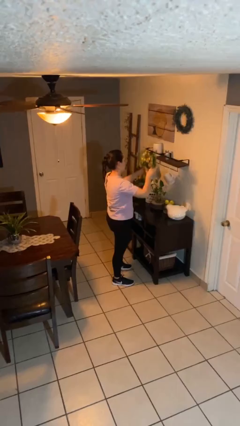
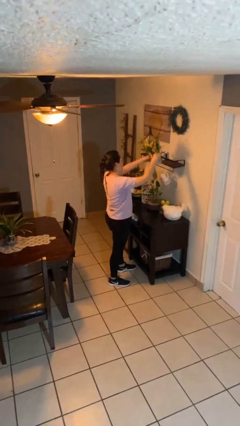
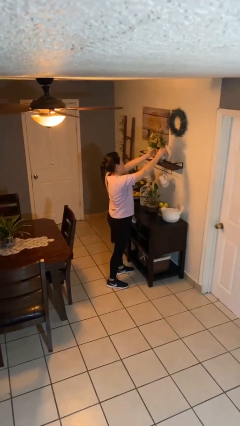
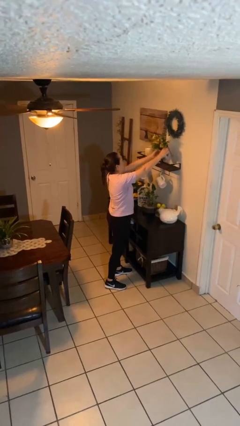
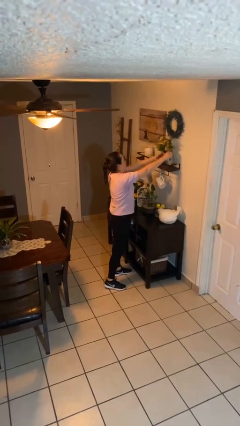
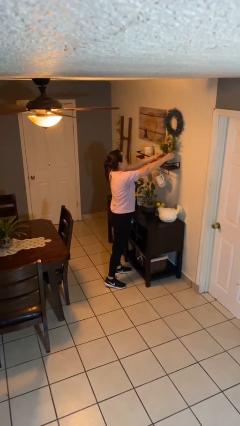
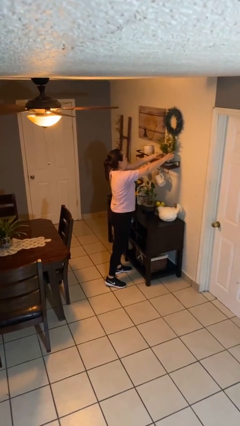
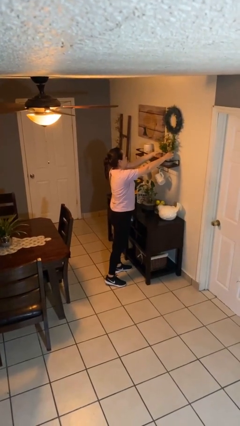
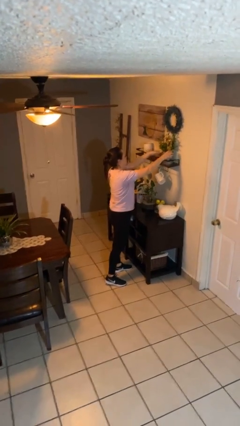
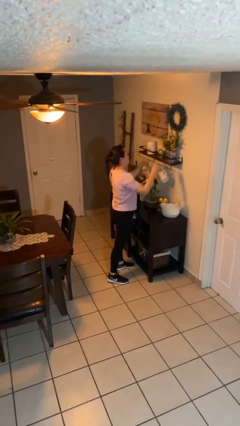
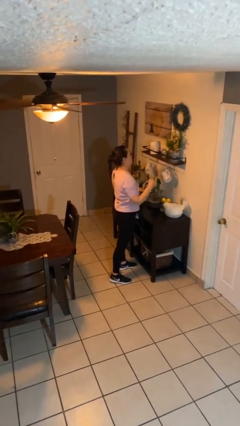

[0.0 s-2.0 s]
person puts down object on countertop

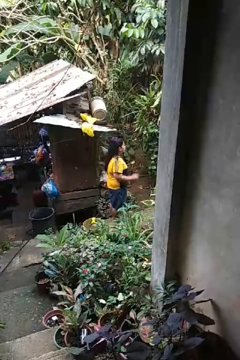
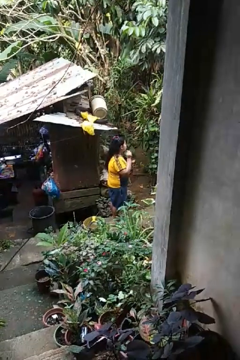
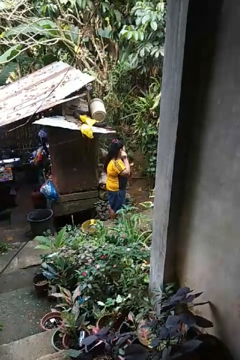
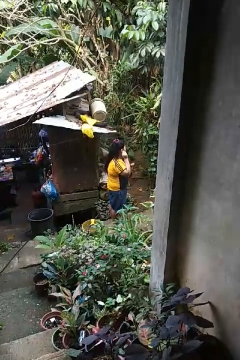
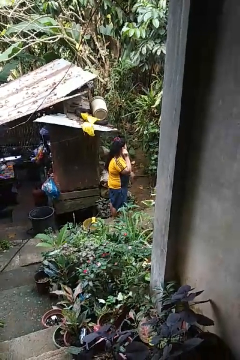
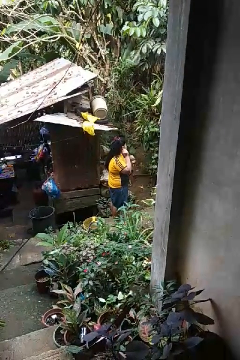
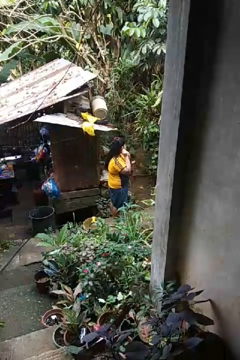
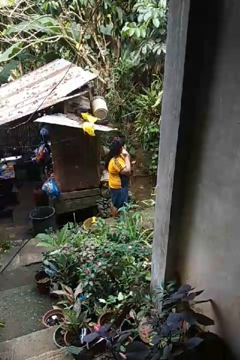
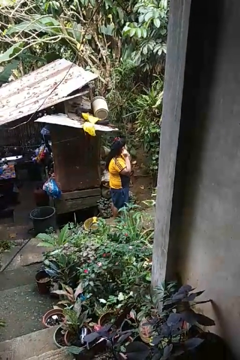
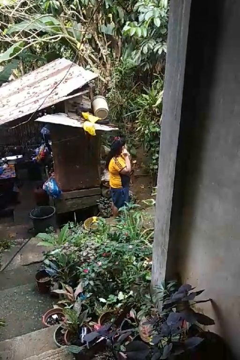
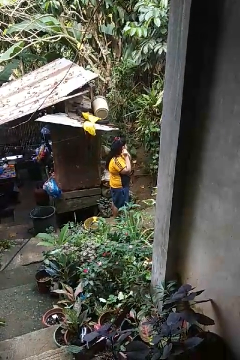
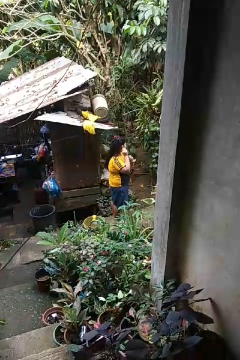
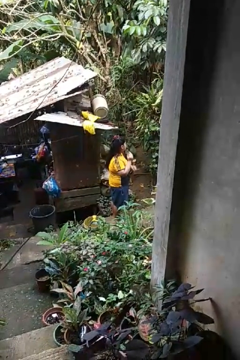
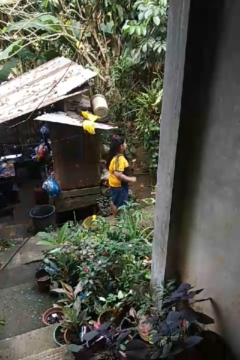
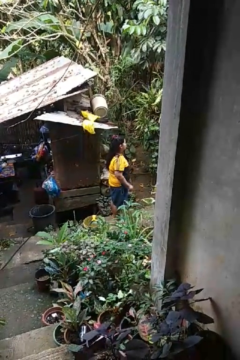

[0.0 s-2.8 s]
person puts on earrings

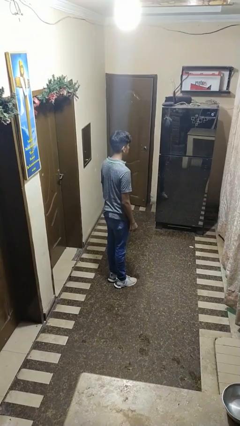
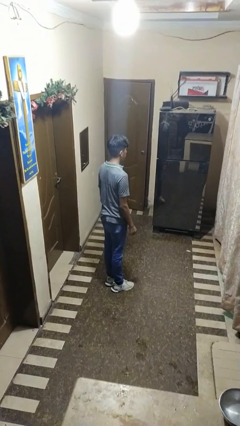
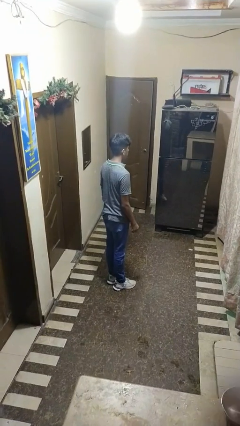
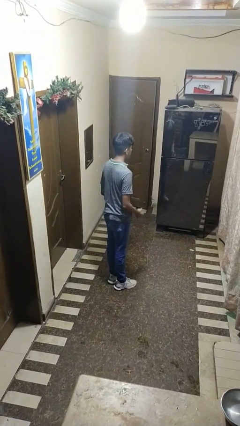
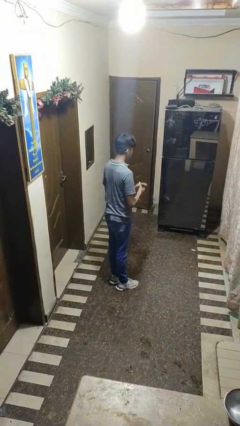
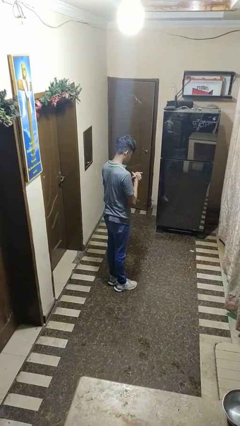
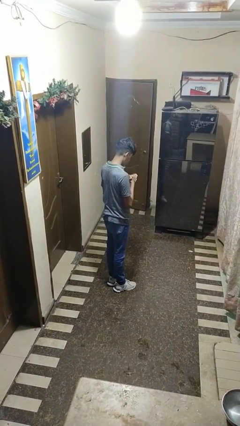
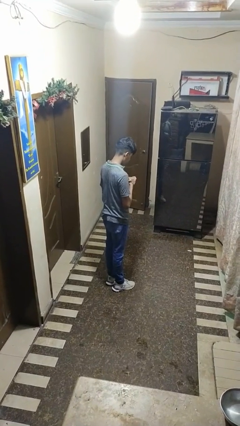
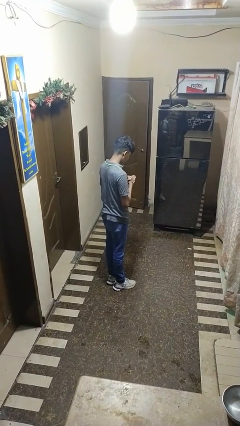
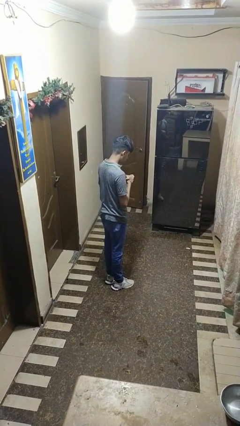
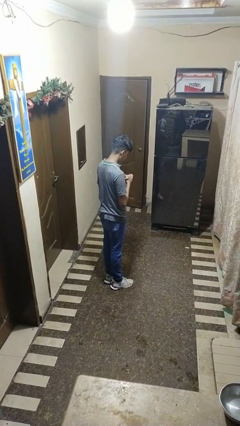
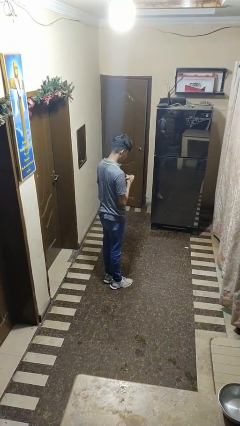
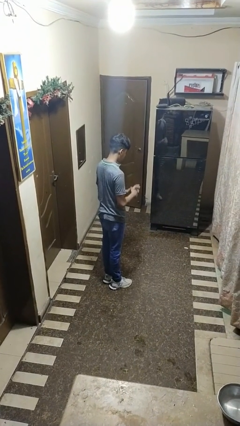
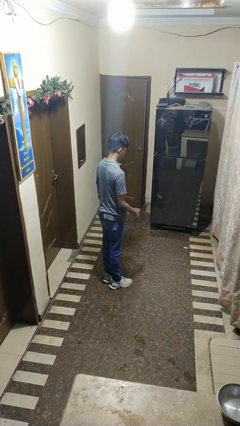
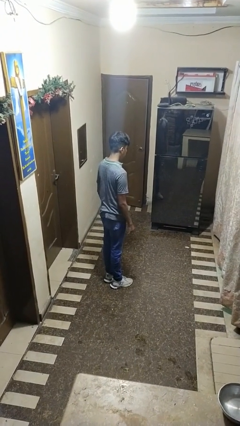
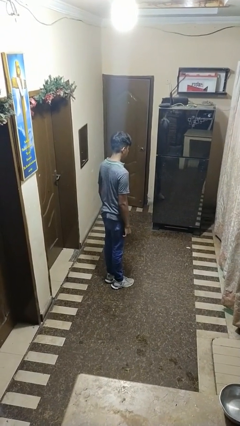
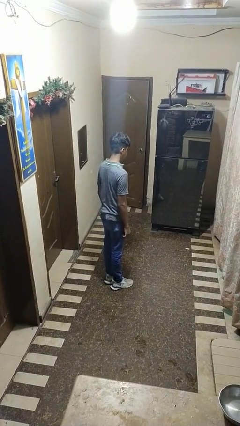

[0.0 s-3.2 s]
person prays

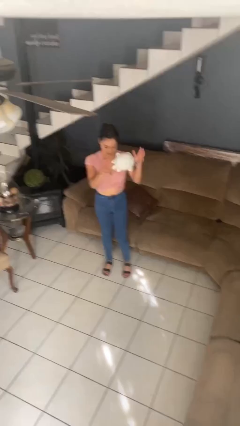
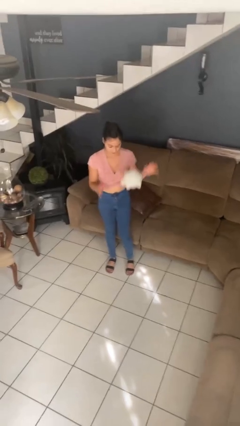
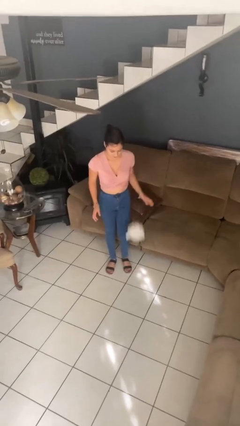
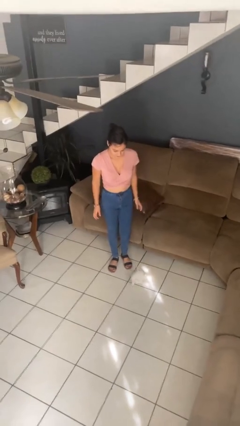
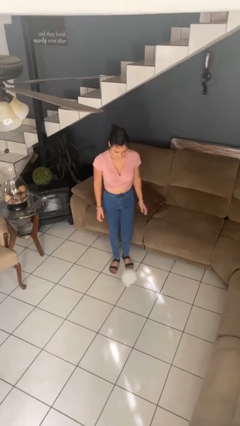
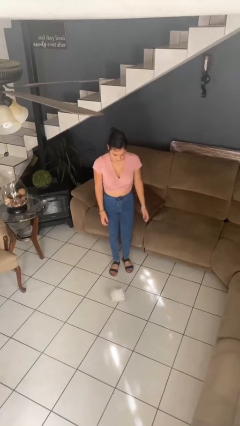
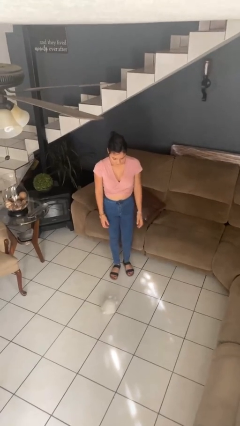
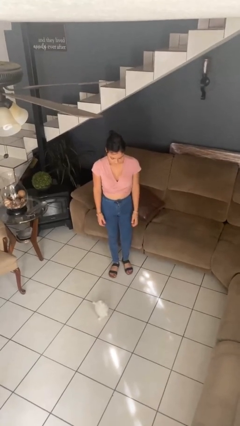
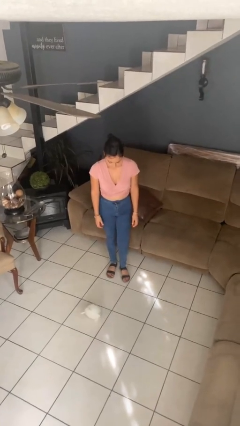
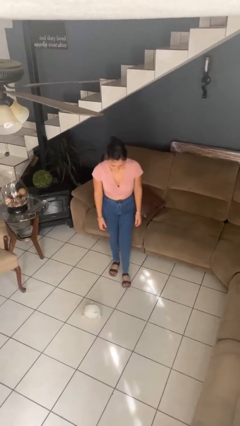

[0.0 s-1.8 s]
person throws object into air

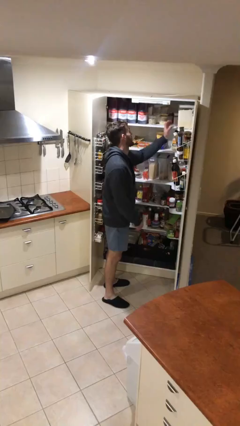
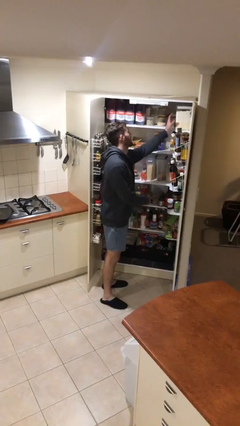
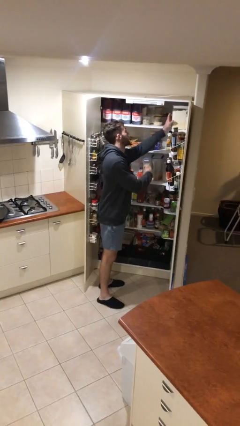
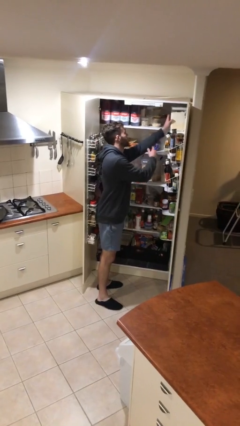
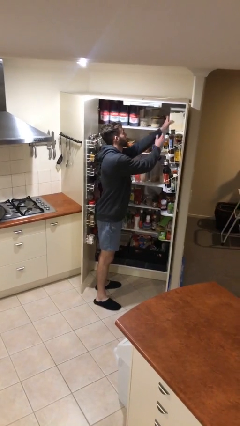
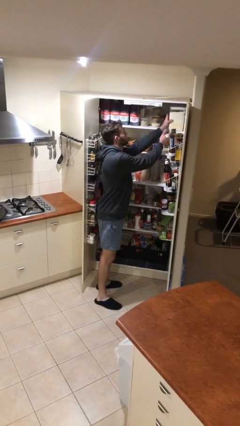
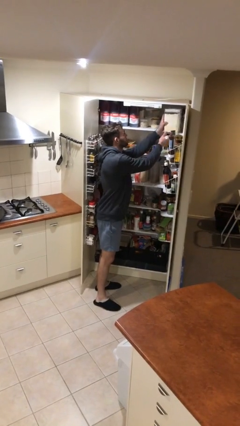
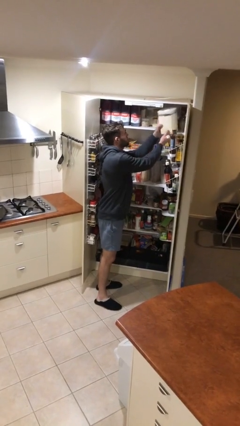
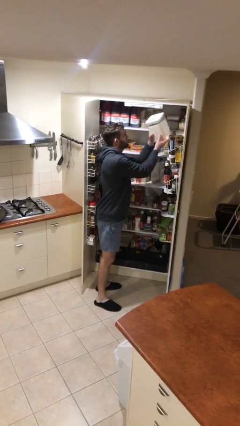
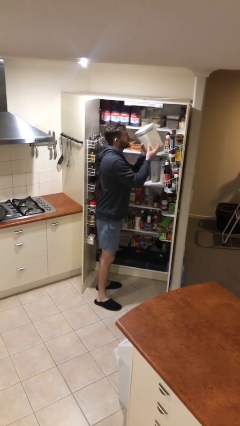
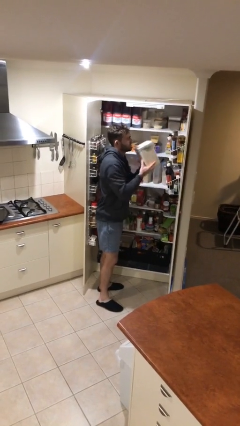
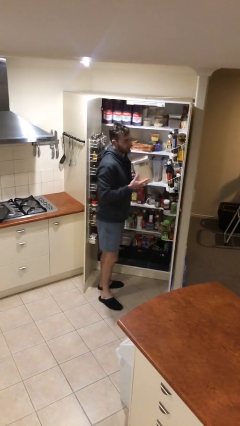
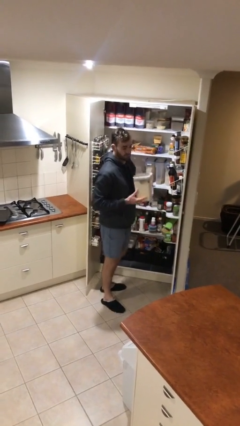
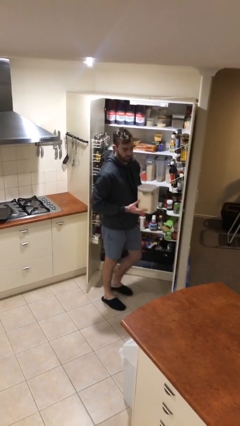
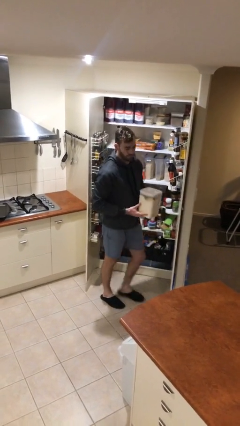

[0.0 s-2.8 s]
person picks up object from shelf

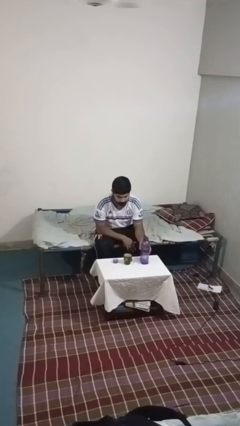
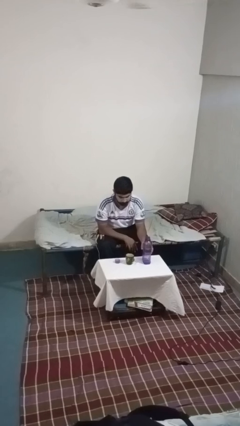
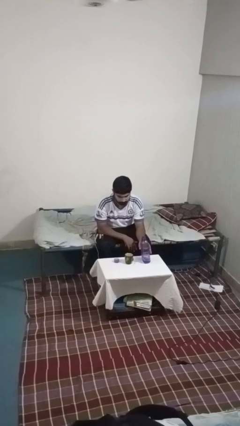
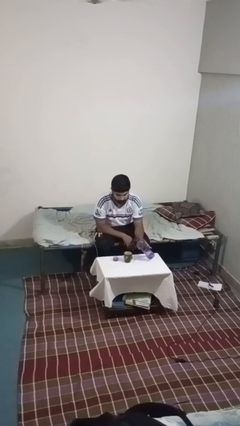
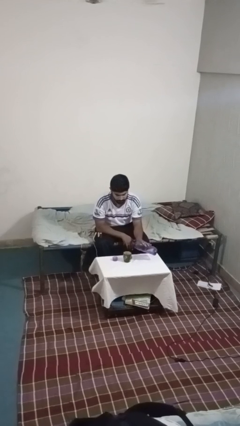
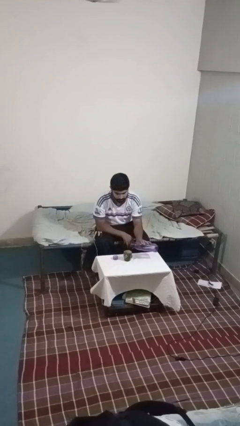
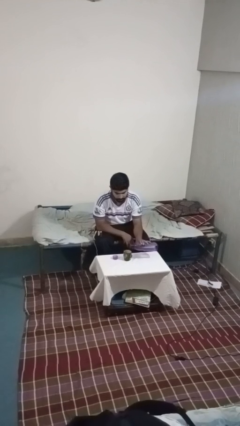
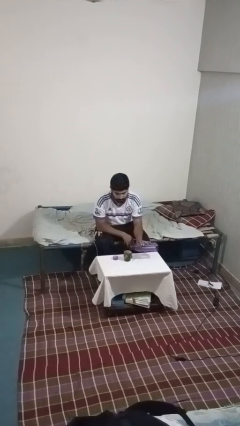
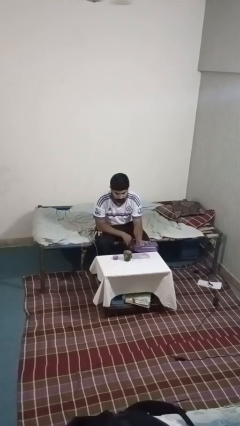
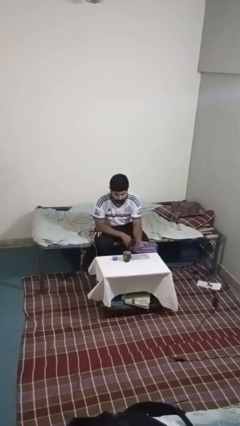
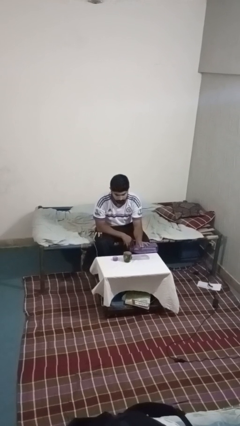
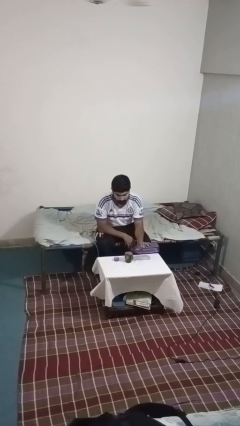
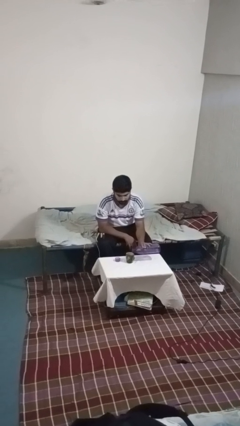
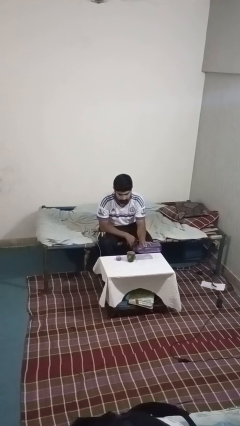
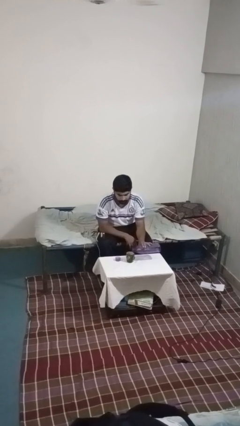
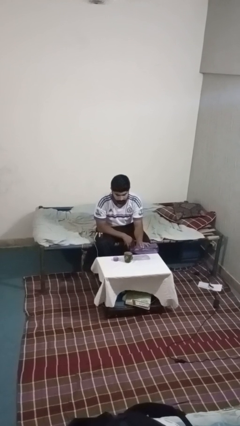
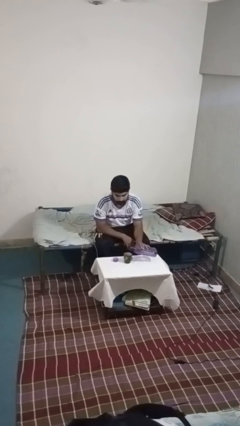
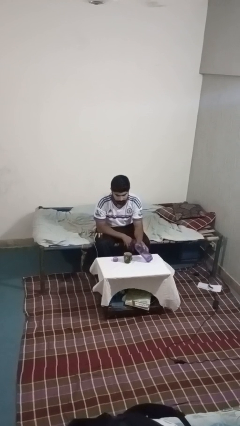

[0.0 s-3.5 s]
person pours liquid into cup

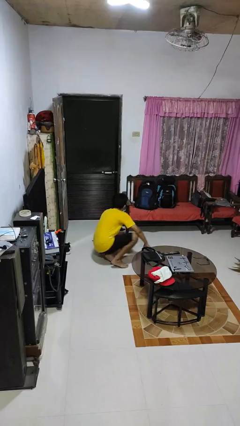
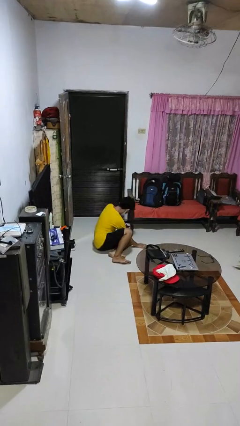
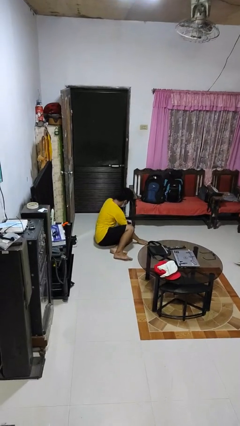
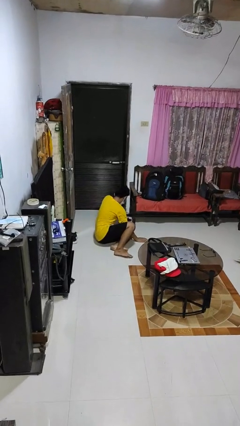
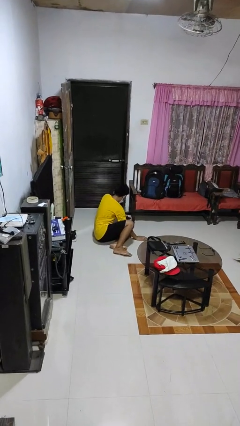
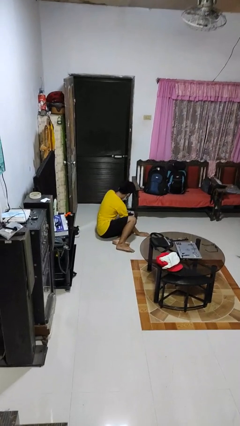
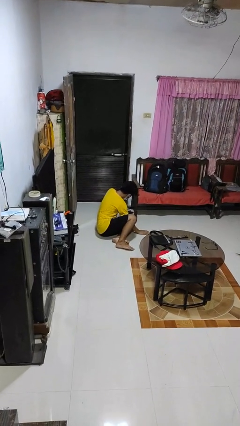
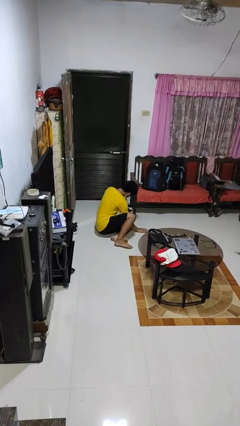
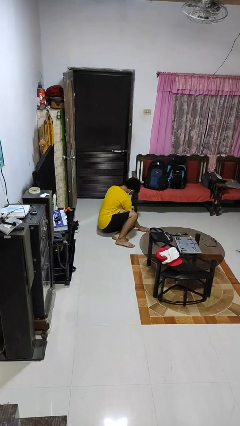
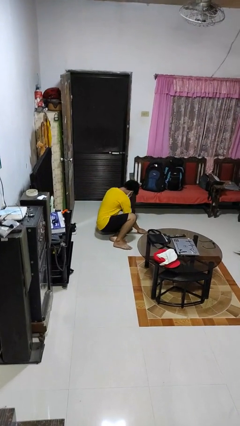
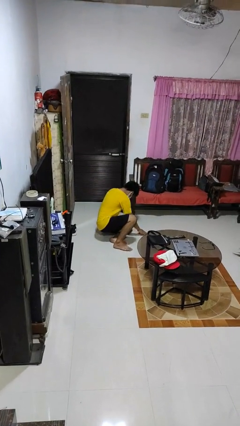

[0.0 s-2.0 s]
person lies down on floor
